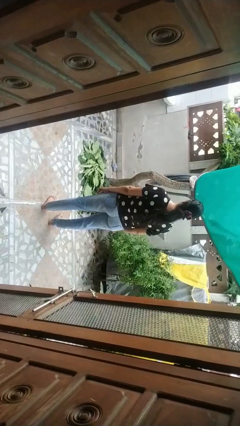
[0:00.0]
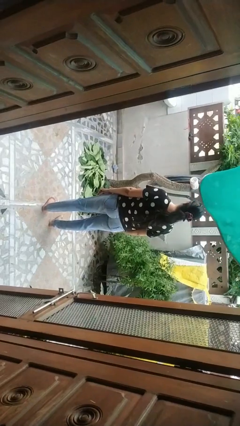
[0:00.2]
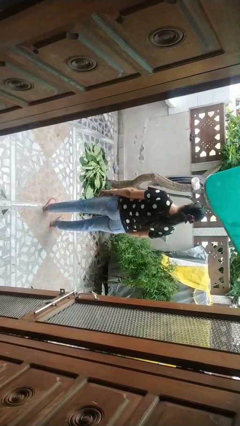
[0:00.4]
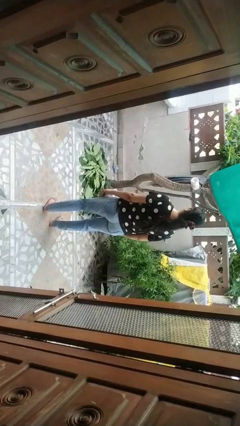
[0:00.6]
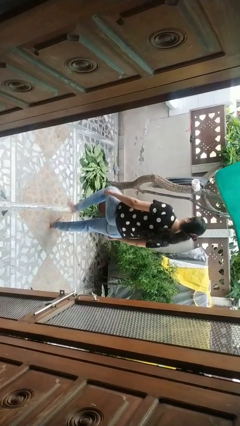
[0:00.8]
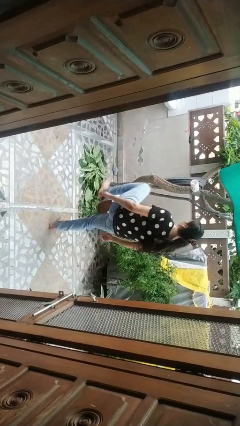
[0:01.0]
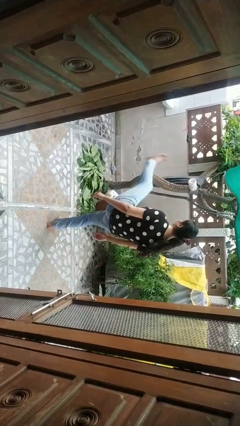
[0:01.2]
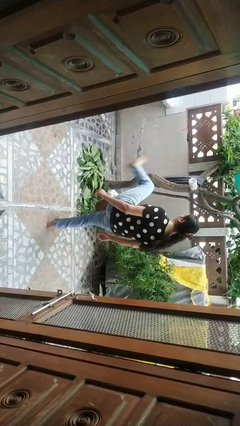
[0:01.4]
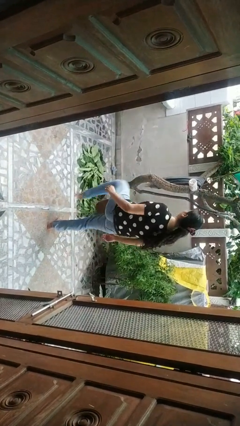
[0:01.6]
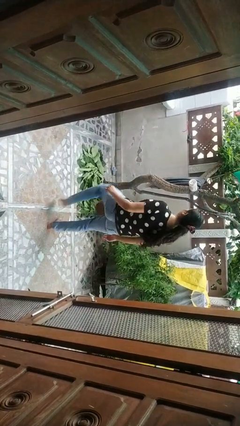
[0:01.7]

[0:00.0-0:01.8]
person karate kicks

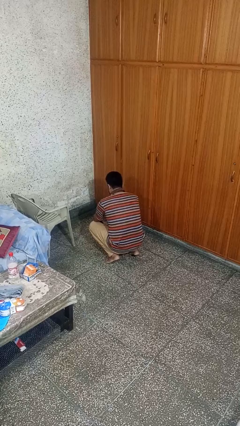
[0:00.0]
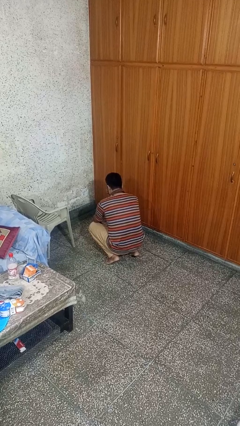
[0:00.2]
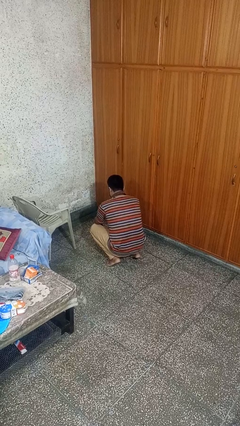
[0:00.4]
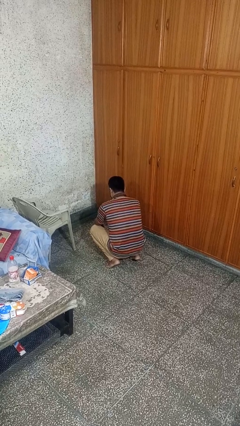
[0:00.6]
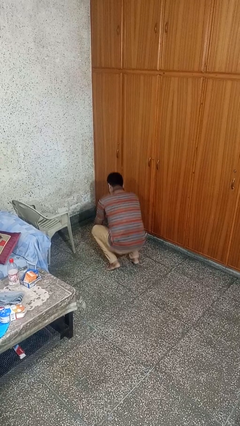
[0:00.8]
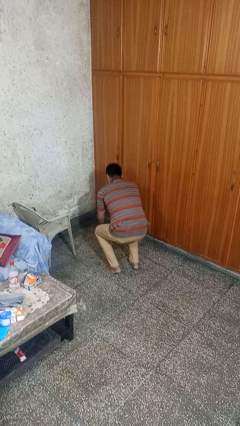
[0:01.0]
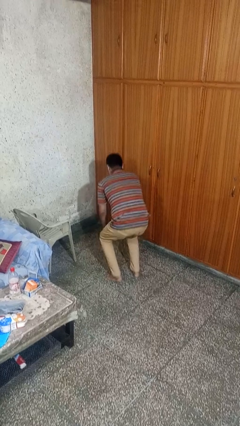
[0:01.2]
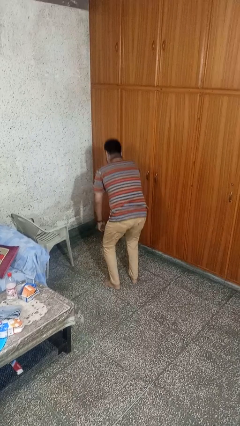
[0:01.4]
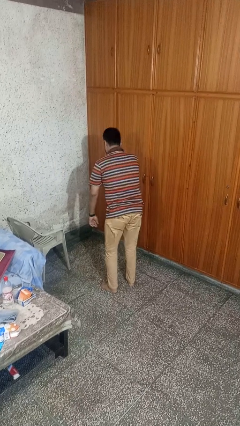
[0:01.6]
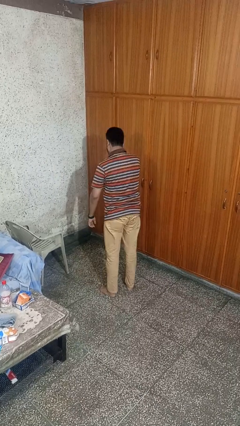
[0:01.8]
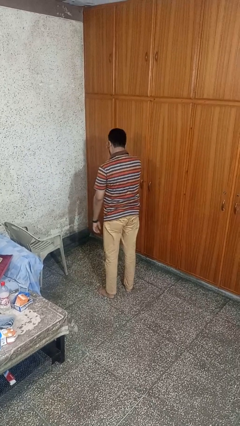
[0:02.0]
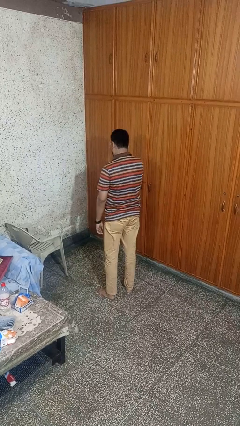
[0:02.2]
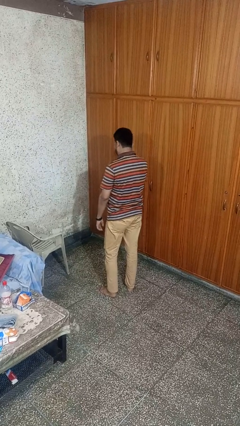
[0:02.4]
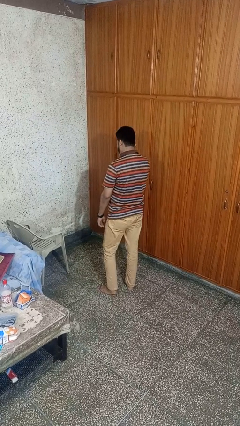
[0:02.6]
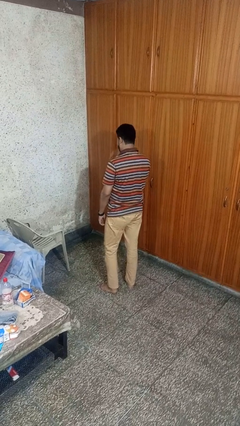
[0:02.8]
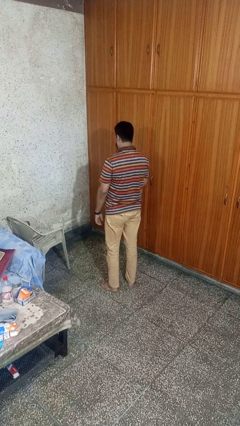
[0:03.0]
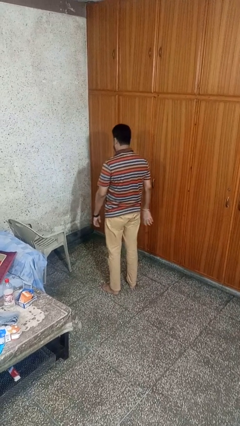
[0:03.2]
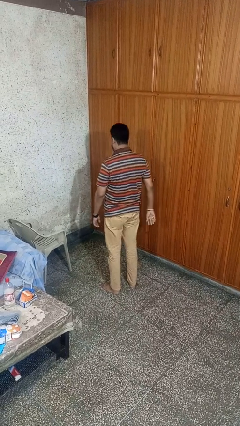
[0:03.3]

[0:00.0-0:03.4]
person stands up

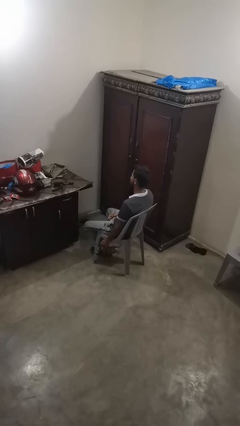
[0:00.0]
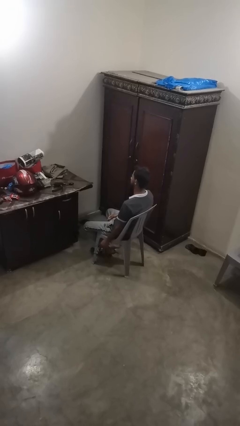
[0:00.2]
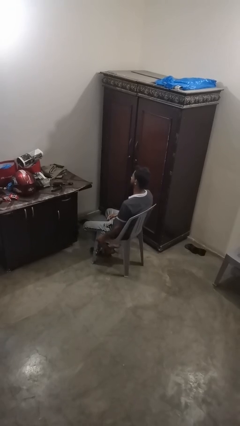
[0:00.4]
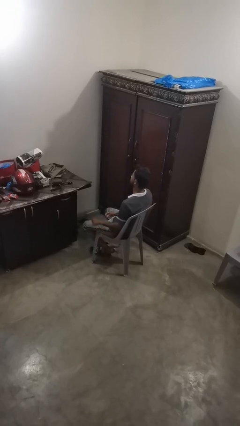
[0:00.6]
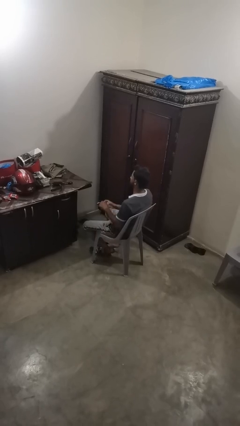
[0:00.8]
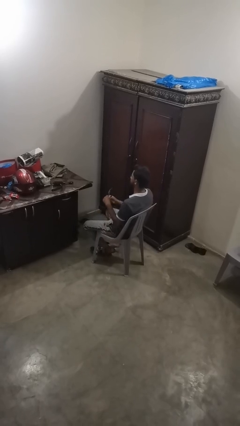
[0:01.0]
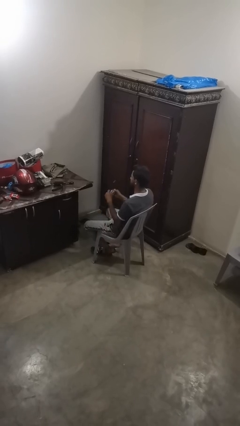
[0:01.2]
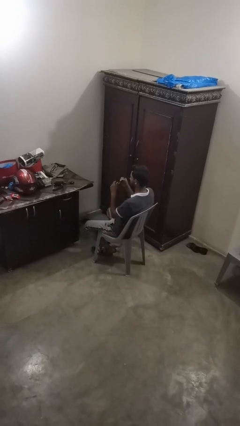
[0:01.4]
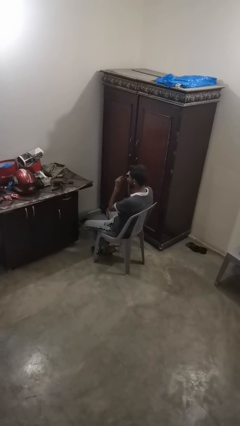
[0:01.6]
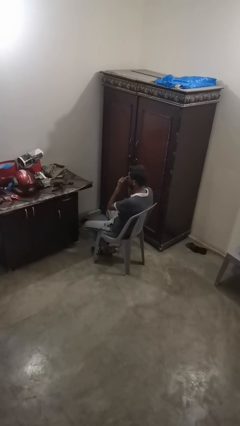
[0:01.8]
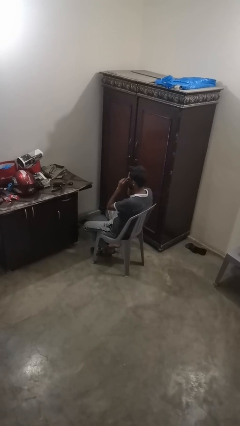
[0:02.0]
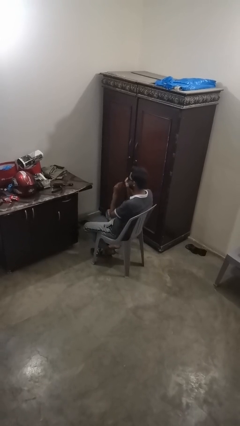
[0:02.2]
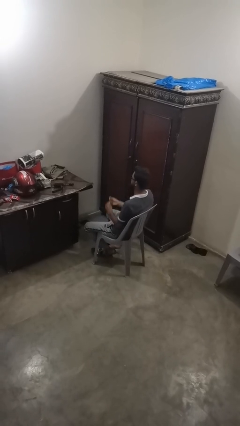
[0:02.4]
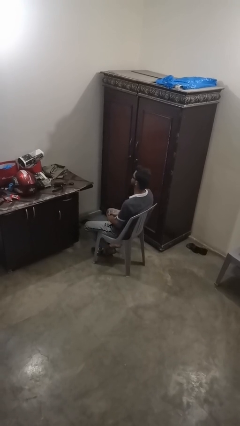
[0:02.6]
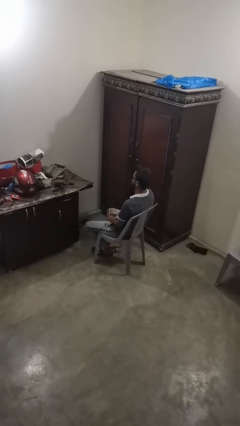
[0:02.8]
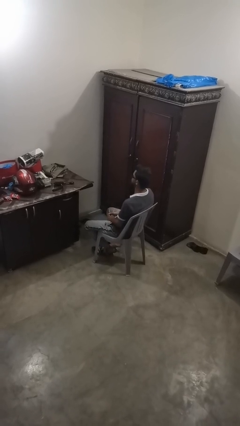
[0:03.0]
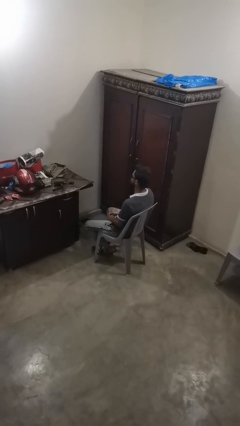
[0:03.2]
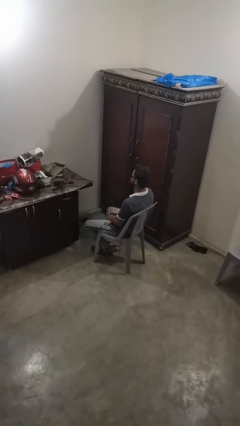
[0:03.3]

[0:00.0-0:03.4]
person puts on sunglasses

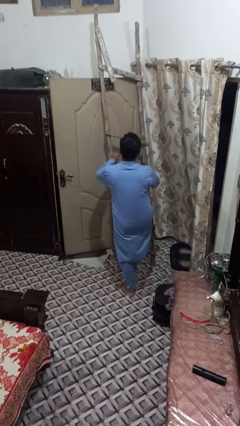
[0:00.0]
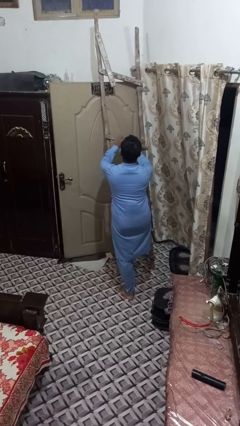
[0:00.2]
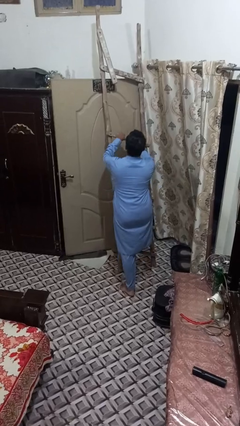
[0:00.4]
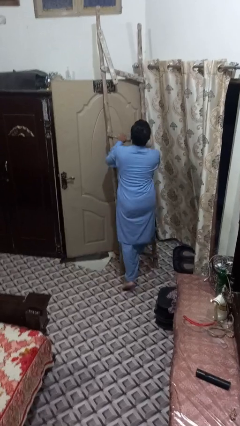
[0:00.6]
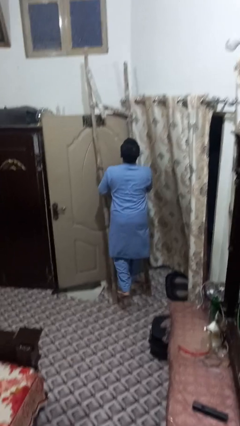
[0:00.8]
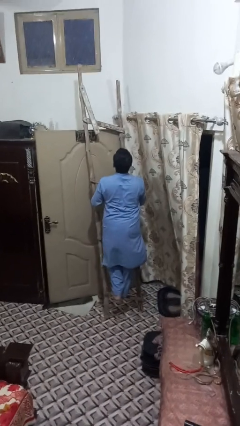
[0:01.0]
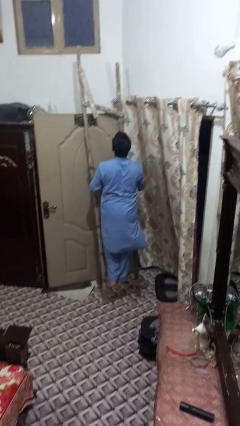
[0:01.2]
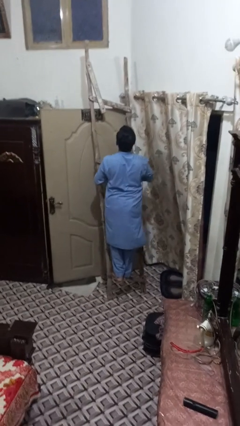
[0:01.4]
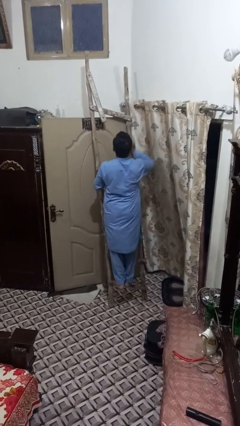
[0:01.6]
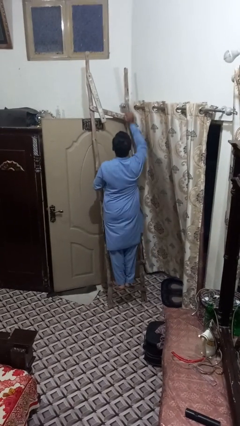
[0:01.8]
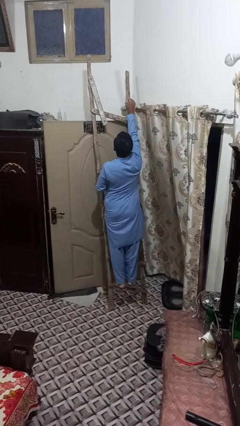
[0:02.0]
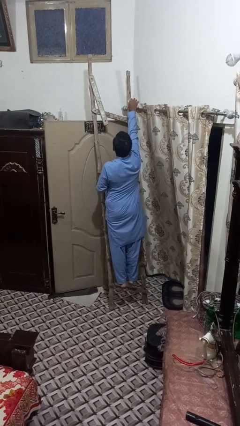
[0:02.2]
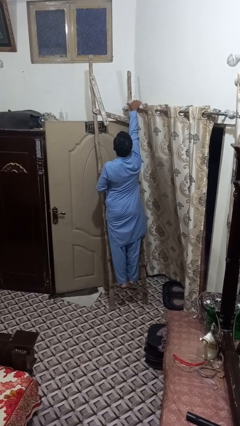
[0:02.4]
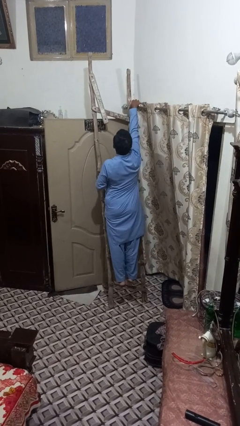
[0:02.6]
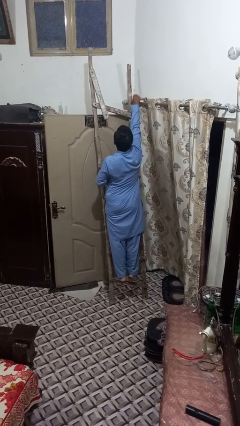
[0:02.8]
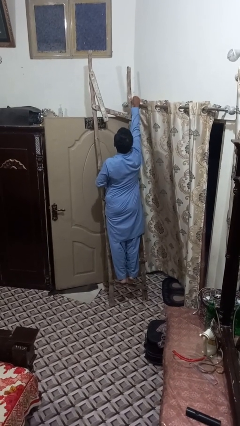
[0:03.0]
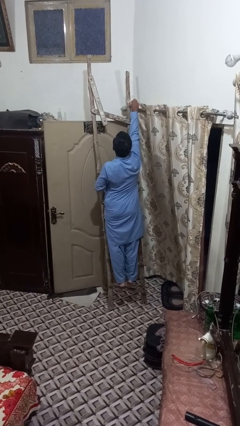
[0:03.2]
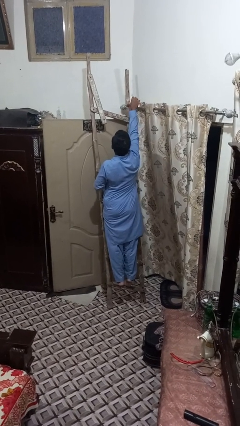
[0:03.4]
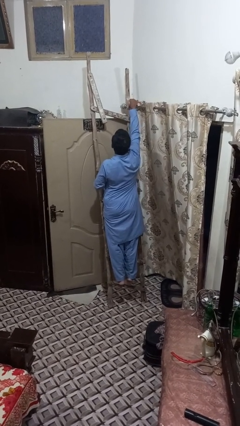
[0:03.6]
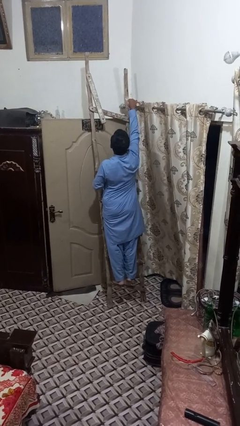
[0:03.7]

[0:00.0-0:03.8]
person climbs up ladder

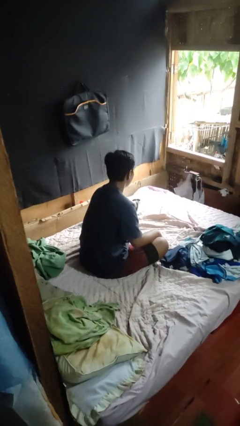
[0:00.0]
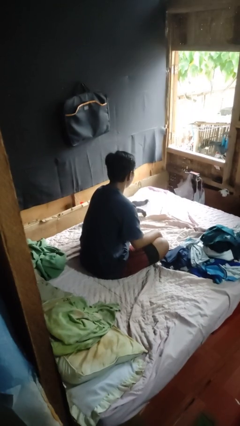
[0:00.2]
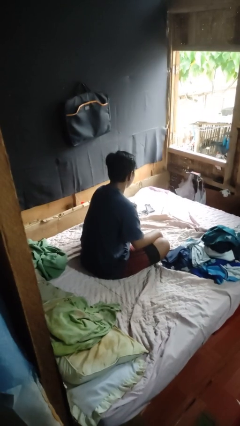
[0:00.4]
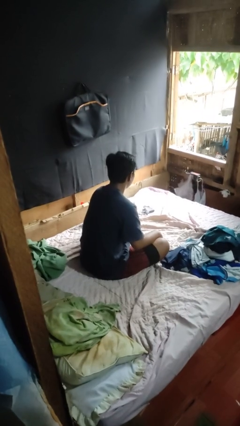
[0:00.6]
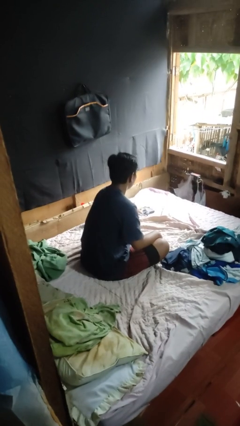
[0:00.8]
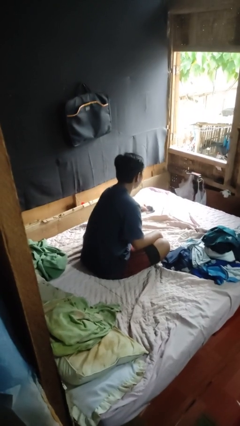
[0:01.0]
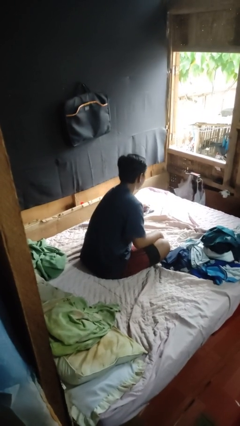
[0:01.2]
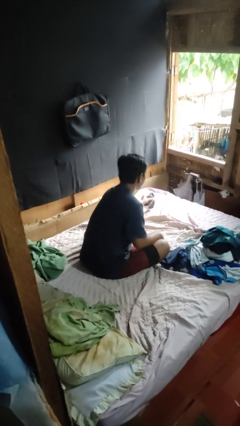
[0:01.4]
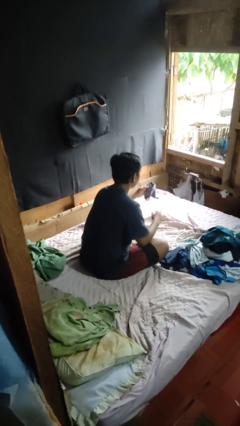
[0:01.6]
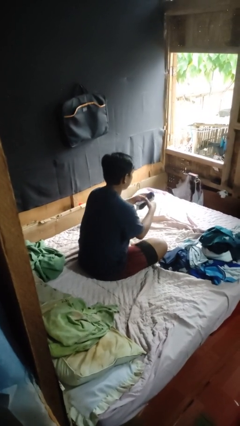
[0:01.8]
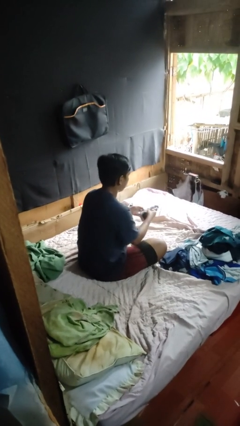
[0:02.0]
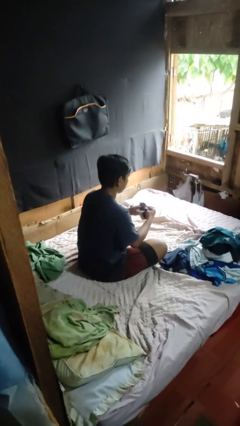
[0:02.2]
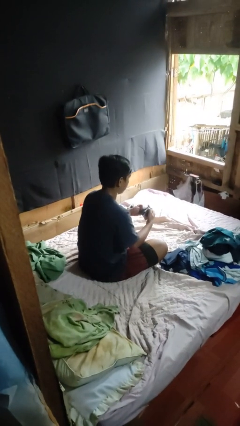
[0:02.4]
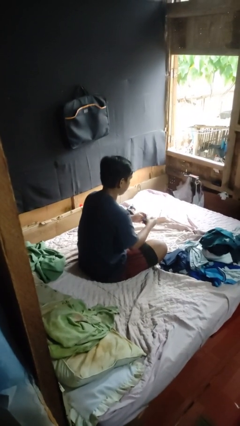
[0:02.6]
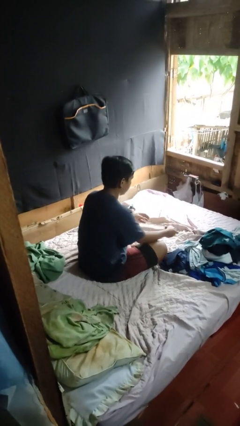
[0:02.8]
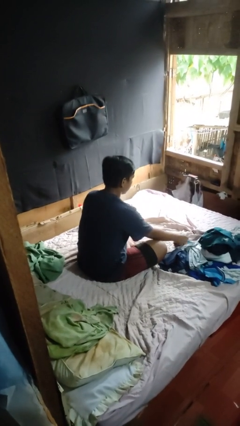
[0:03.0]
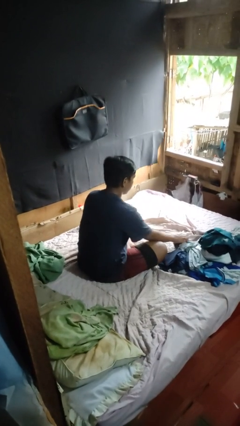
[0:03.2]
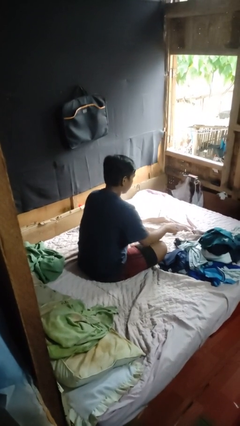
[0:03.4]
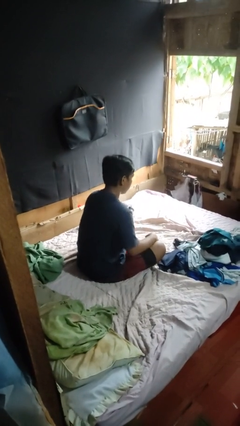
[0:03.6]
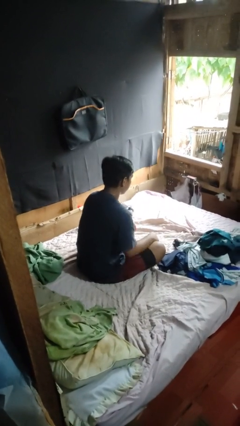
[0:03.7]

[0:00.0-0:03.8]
person folds socks

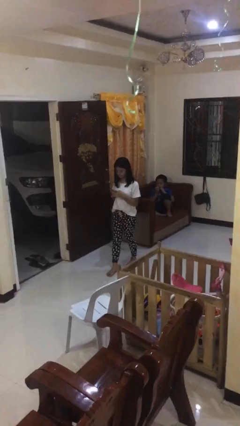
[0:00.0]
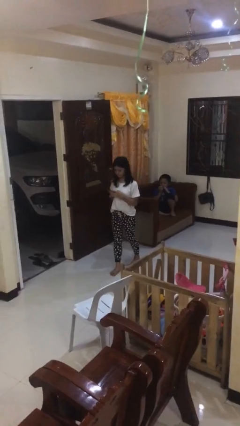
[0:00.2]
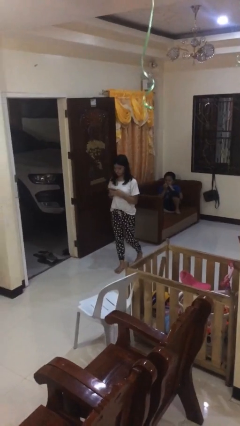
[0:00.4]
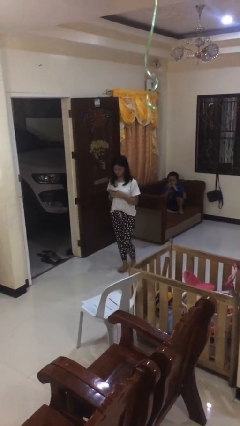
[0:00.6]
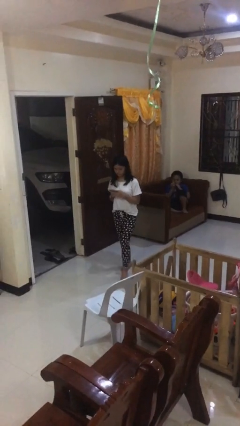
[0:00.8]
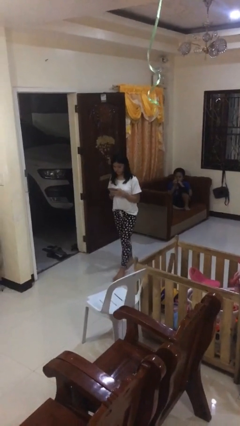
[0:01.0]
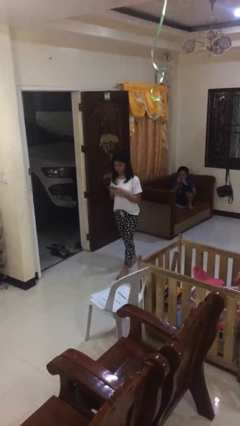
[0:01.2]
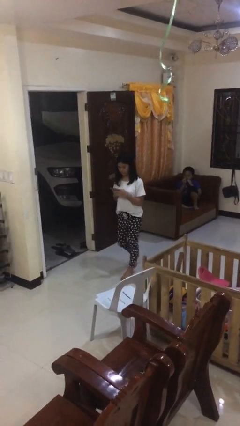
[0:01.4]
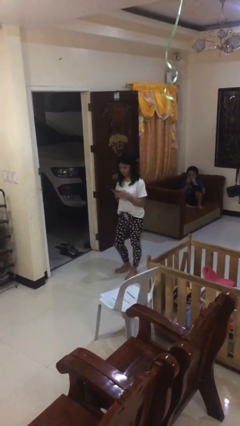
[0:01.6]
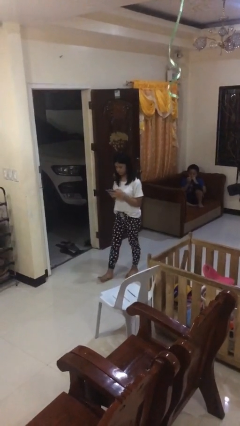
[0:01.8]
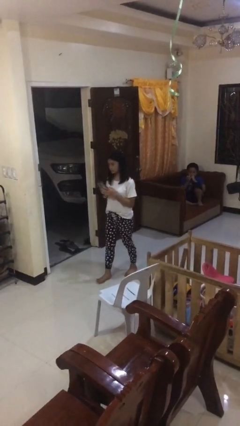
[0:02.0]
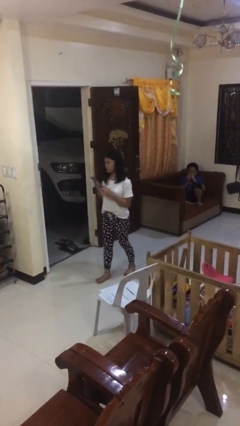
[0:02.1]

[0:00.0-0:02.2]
person texts on phone
